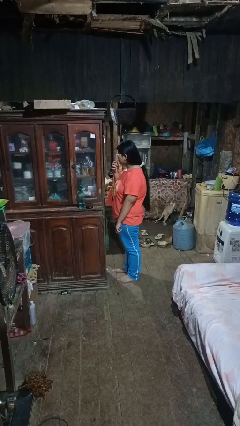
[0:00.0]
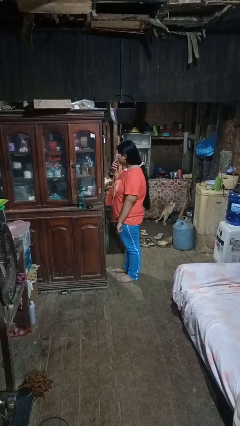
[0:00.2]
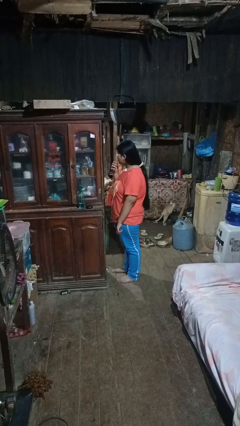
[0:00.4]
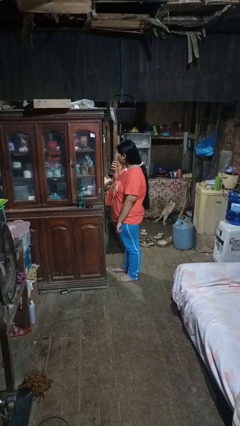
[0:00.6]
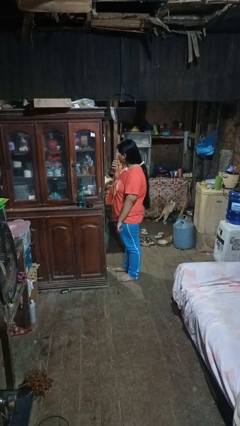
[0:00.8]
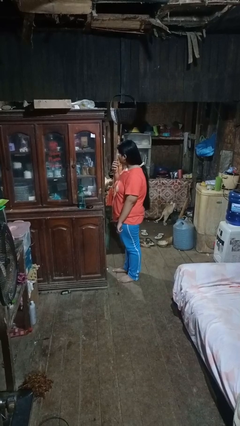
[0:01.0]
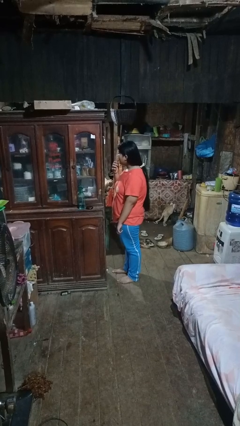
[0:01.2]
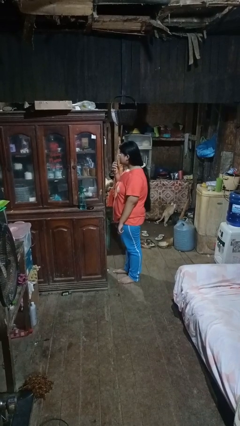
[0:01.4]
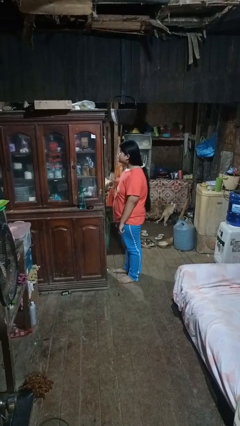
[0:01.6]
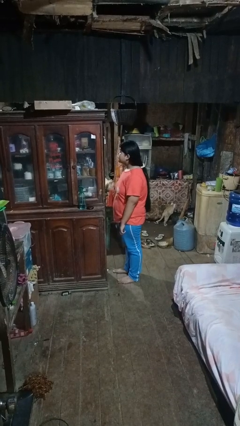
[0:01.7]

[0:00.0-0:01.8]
person applies lip makeup

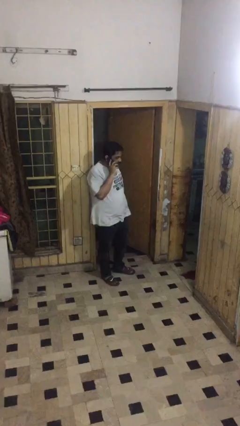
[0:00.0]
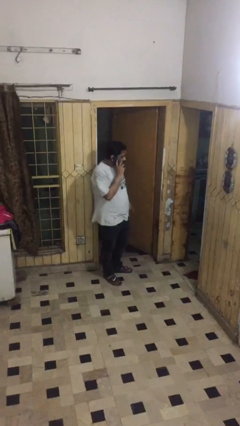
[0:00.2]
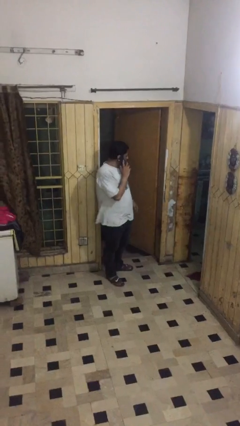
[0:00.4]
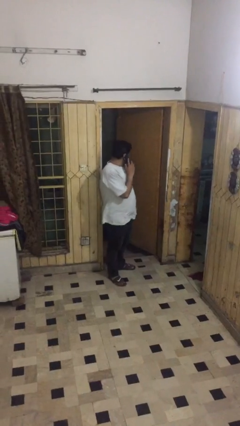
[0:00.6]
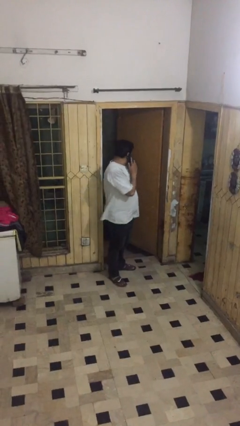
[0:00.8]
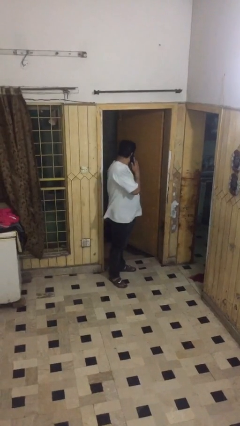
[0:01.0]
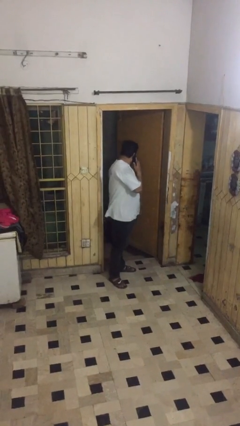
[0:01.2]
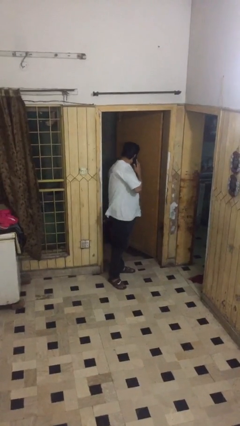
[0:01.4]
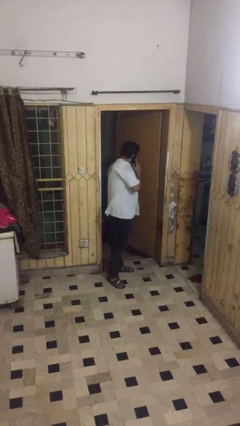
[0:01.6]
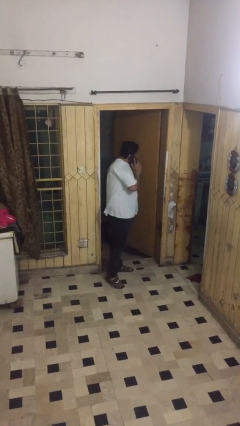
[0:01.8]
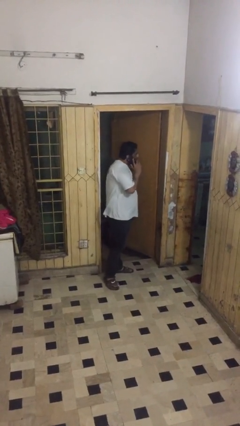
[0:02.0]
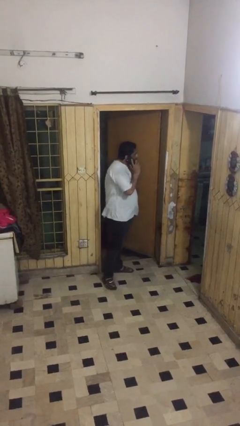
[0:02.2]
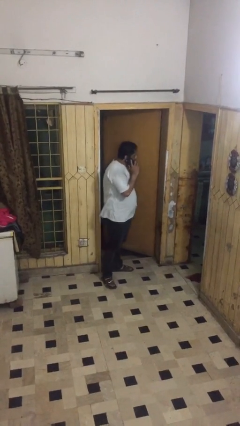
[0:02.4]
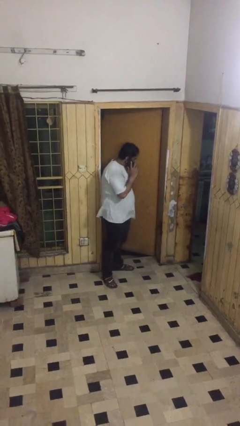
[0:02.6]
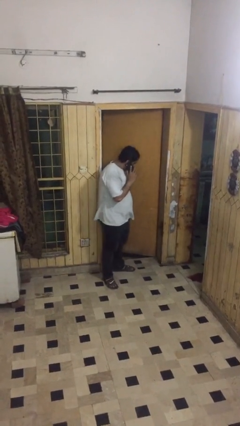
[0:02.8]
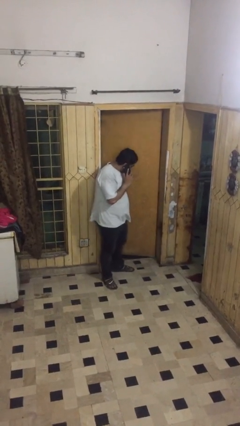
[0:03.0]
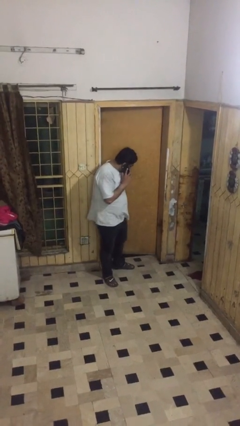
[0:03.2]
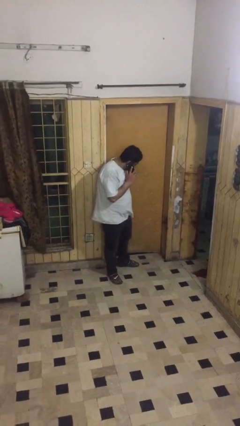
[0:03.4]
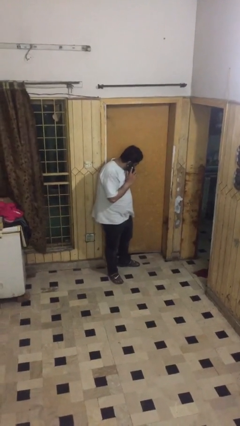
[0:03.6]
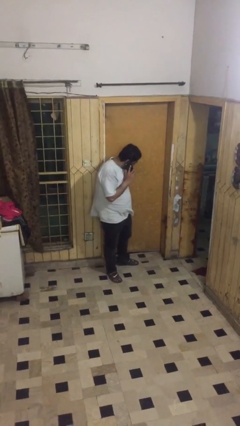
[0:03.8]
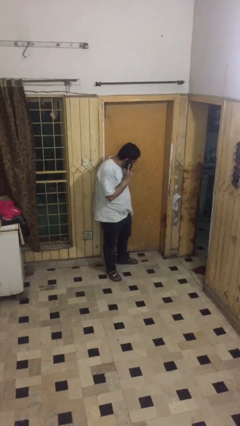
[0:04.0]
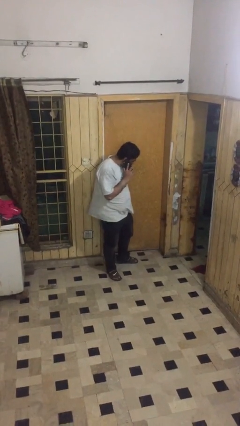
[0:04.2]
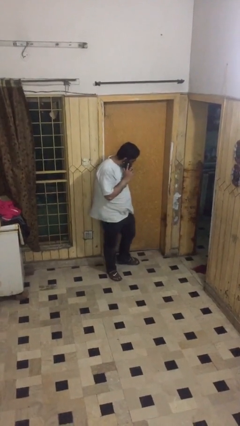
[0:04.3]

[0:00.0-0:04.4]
person closes facility door

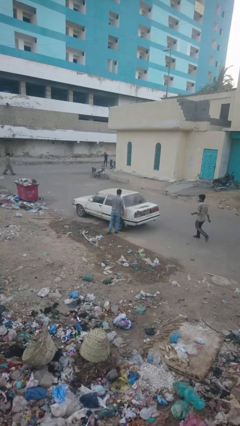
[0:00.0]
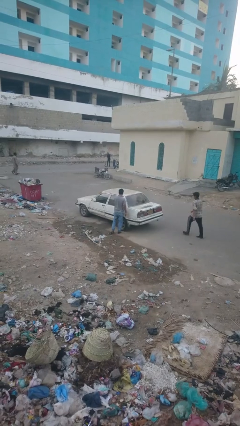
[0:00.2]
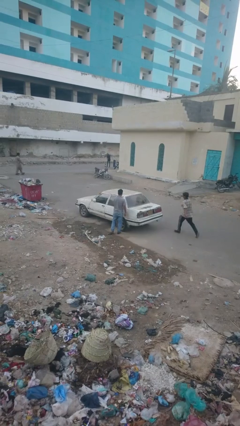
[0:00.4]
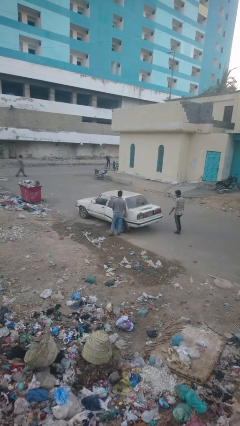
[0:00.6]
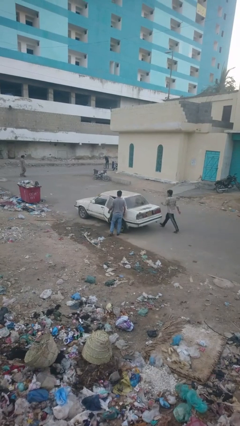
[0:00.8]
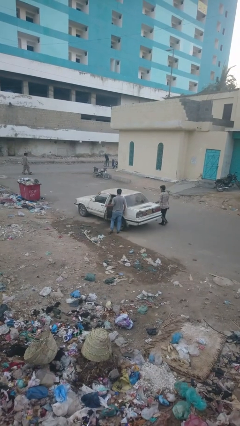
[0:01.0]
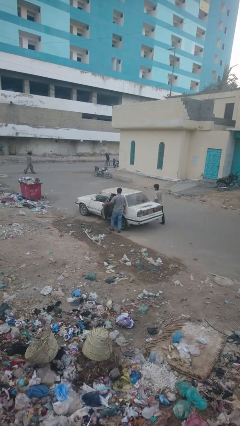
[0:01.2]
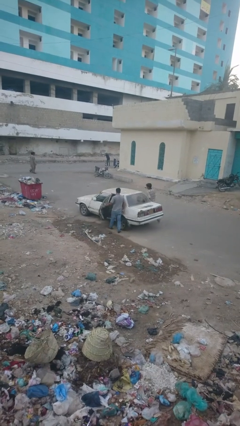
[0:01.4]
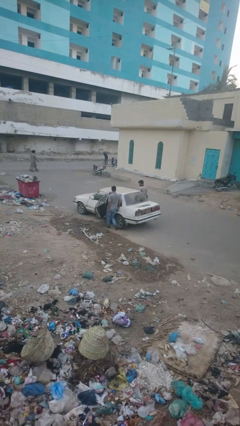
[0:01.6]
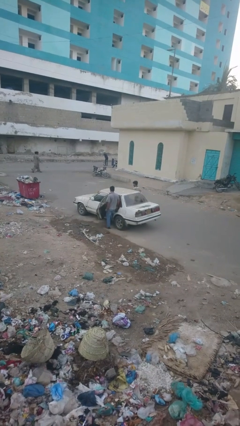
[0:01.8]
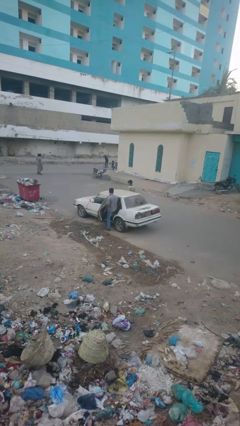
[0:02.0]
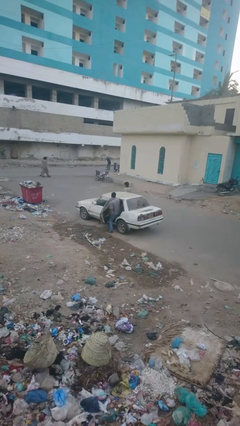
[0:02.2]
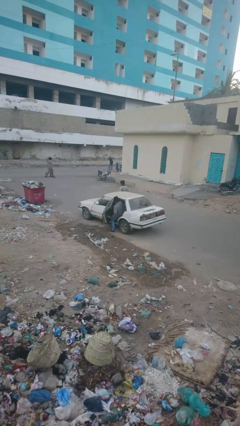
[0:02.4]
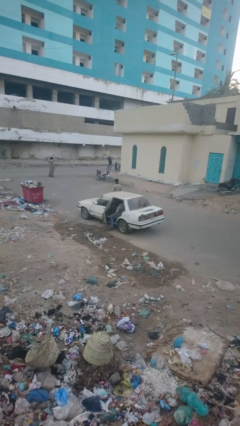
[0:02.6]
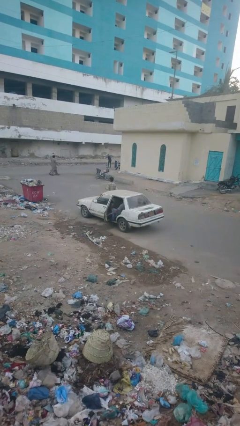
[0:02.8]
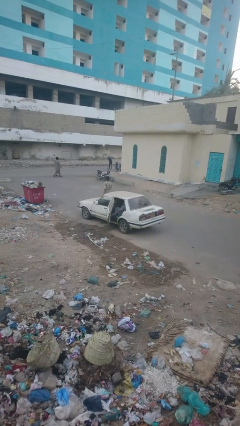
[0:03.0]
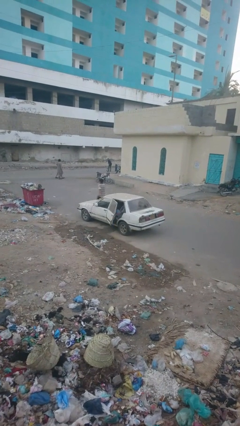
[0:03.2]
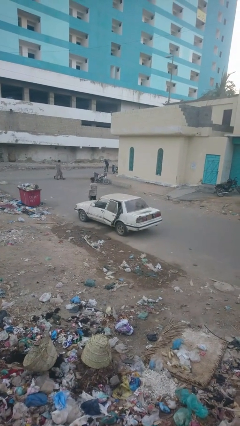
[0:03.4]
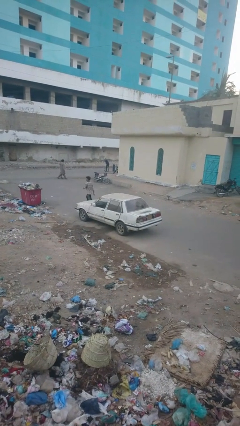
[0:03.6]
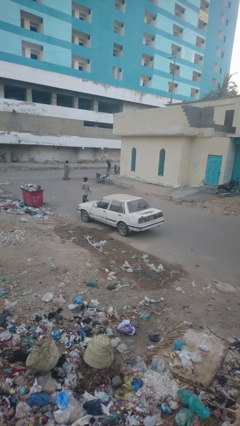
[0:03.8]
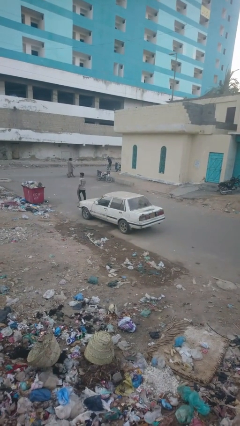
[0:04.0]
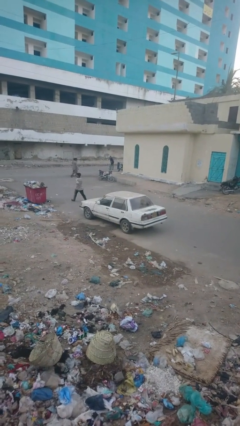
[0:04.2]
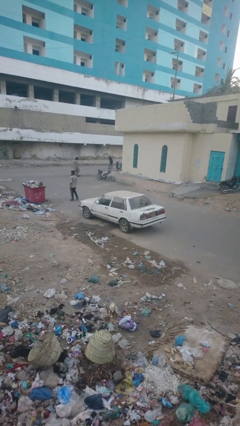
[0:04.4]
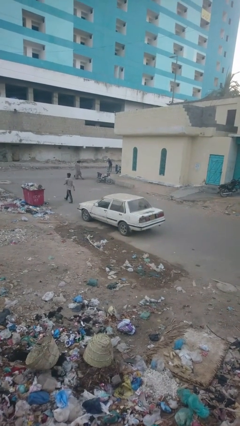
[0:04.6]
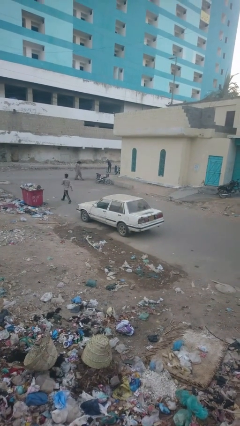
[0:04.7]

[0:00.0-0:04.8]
car picks up person

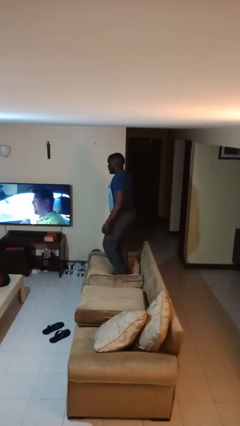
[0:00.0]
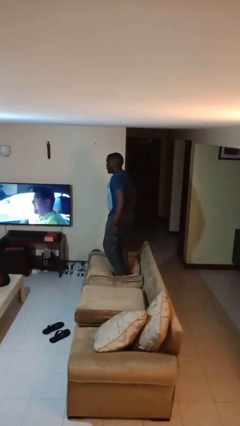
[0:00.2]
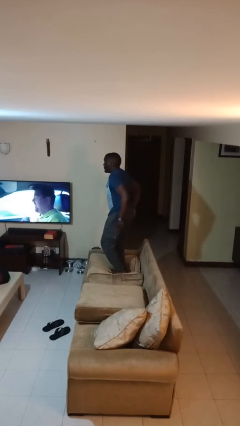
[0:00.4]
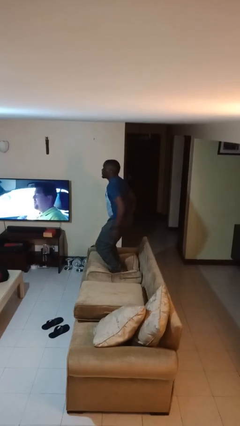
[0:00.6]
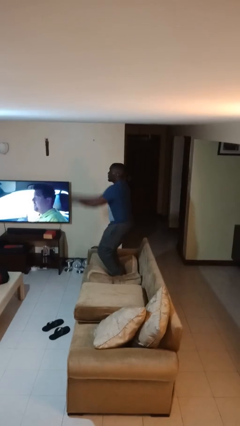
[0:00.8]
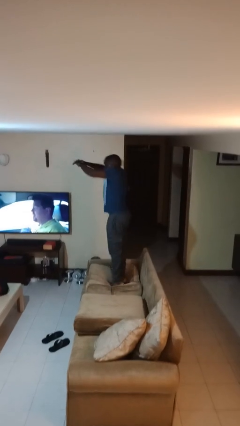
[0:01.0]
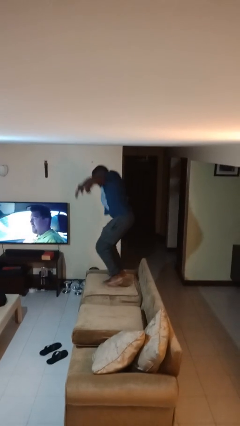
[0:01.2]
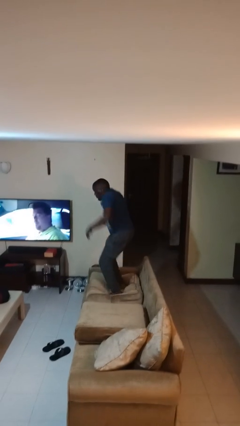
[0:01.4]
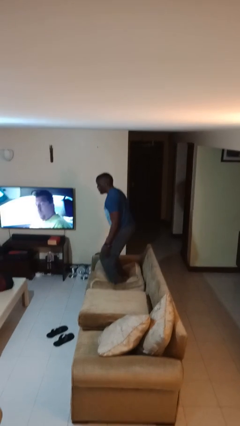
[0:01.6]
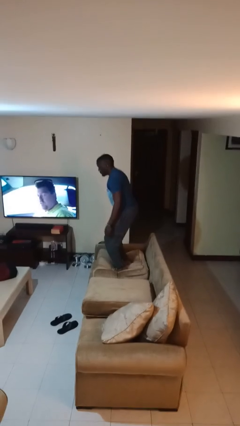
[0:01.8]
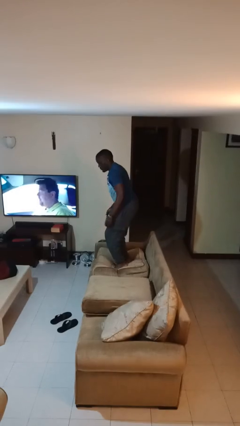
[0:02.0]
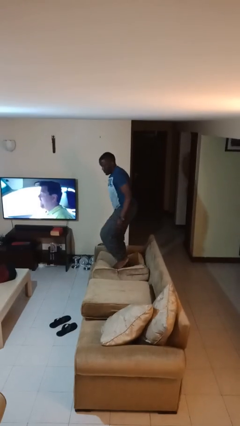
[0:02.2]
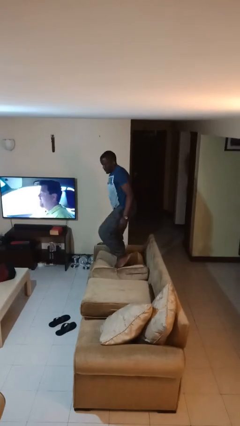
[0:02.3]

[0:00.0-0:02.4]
person jumps on couch

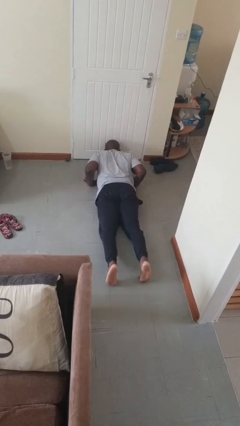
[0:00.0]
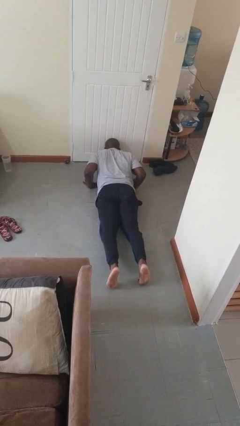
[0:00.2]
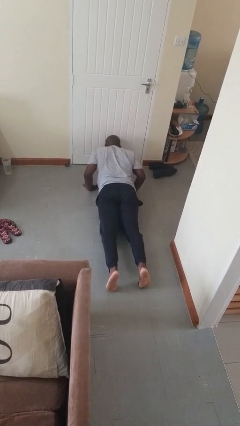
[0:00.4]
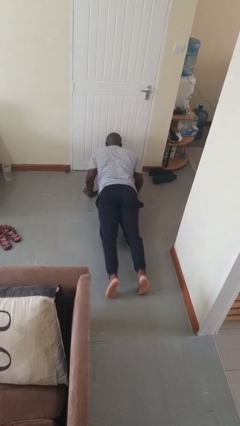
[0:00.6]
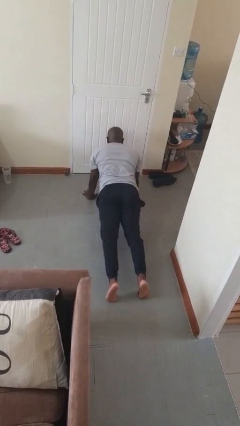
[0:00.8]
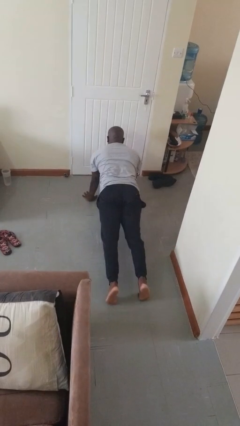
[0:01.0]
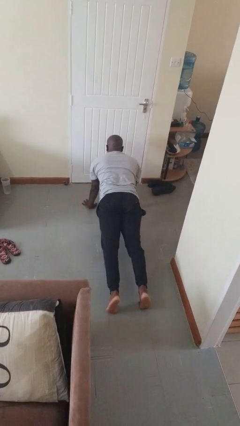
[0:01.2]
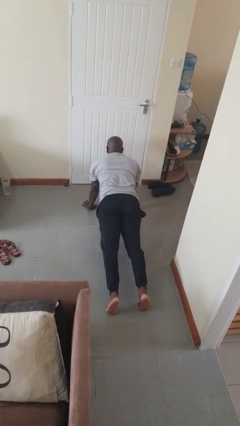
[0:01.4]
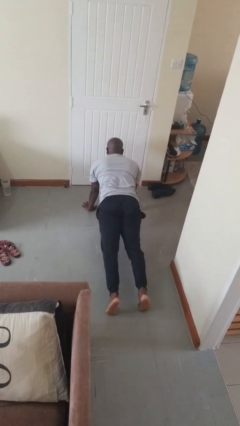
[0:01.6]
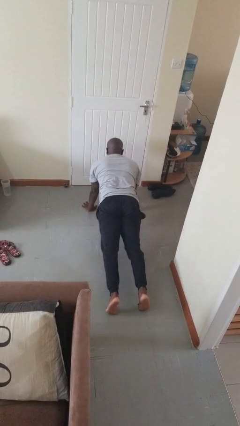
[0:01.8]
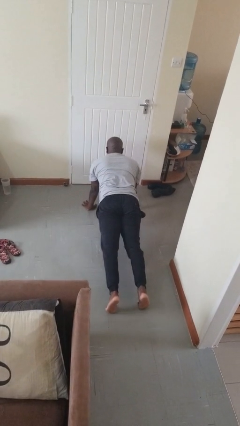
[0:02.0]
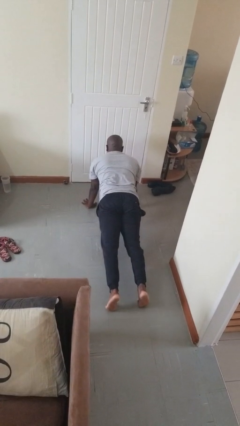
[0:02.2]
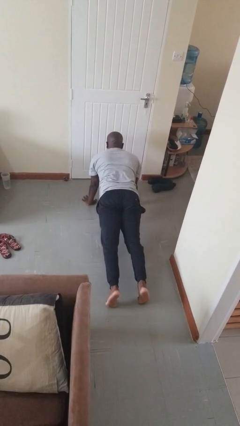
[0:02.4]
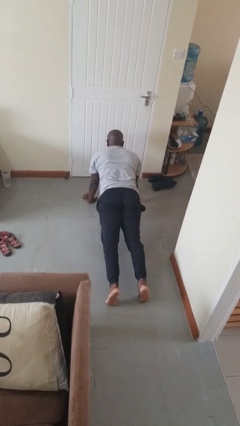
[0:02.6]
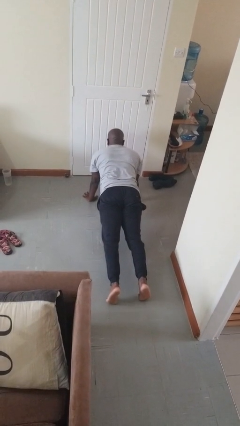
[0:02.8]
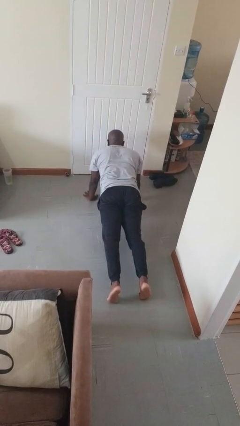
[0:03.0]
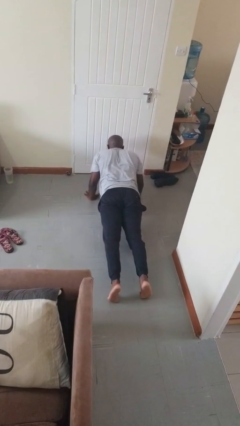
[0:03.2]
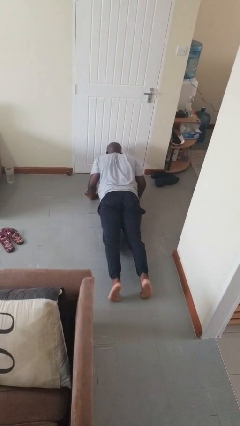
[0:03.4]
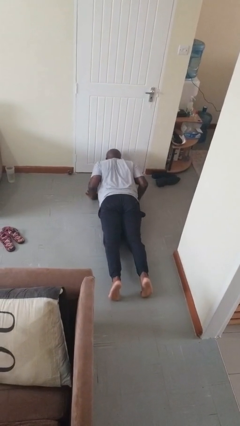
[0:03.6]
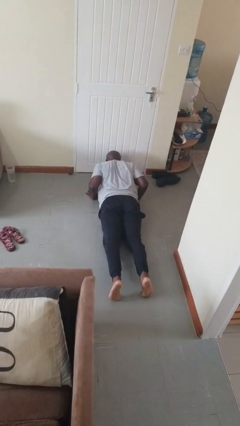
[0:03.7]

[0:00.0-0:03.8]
person exercises with pushup
